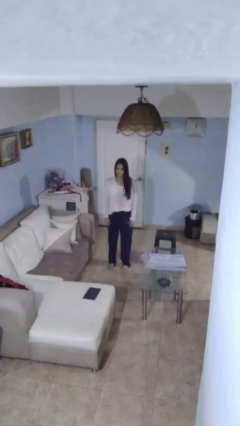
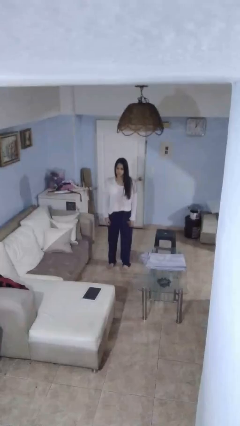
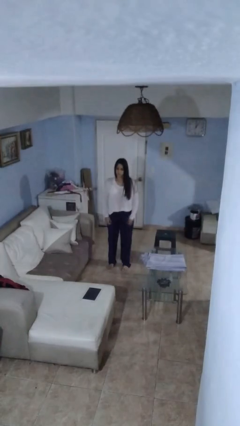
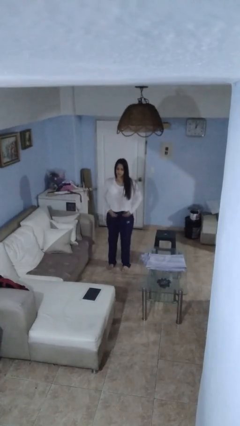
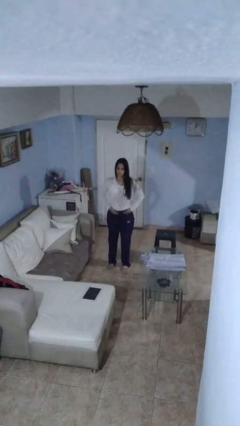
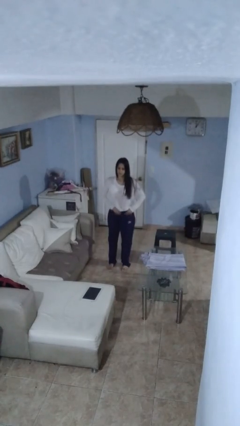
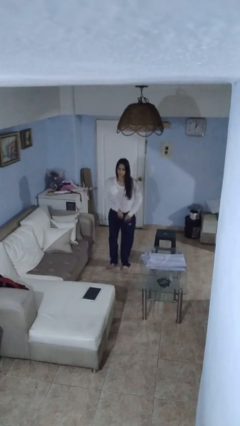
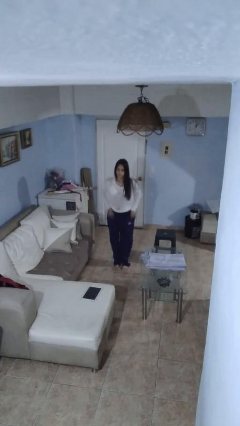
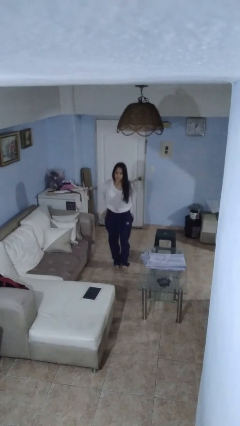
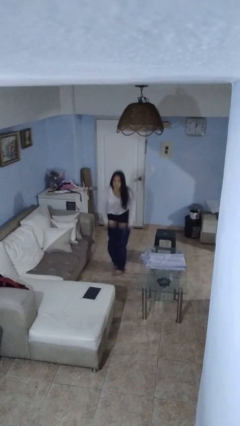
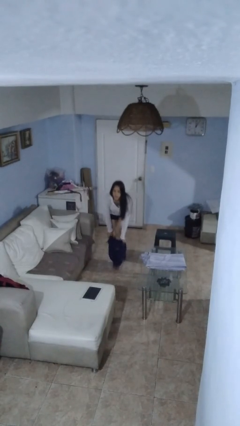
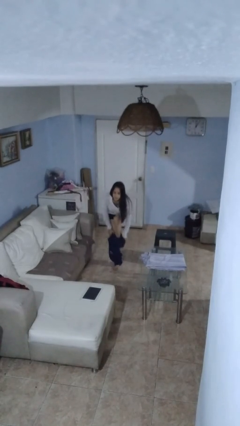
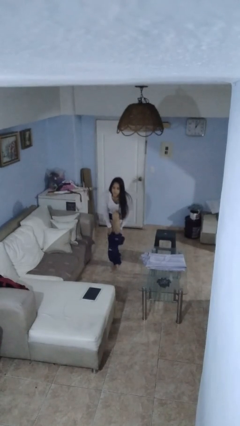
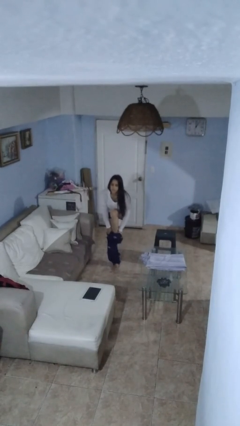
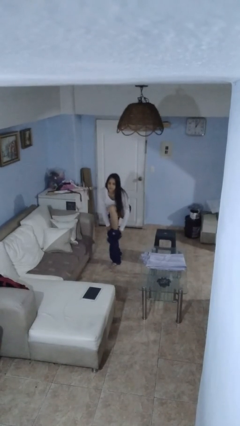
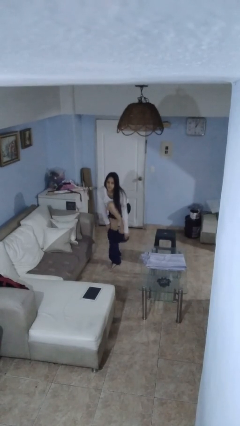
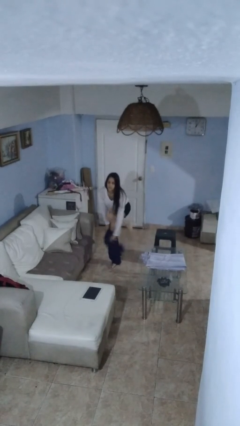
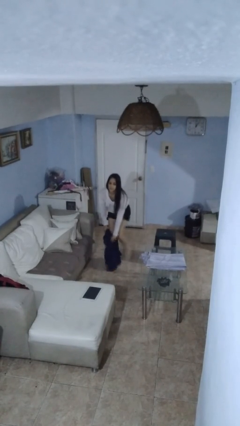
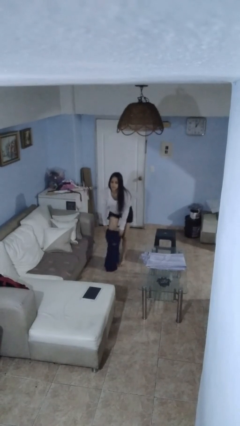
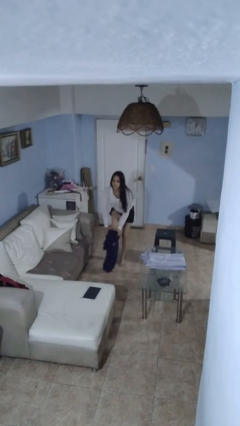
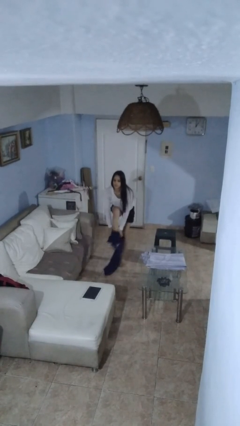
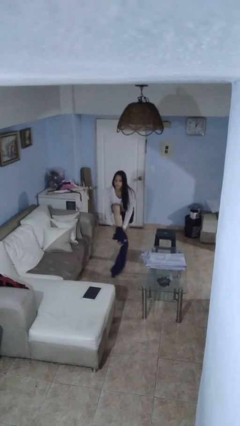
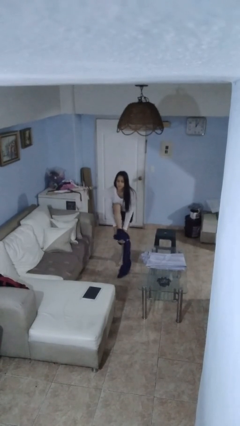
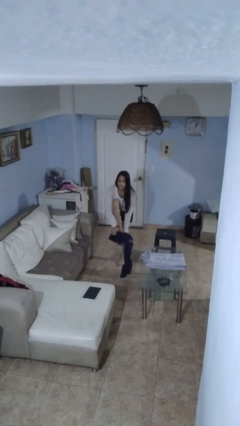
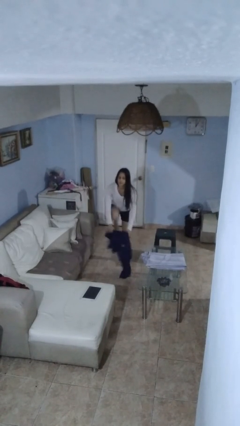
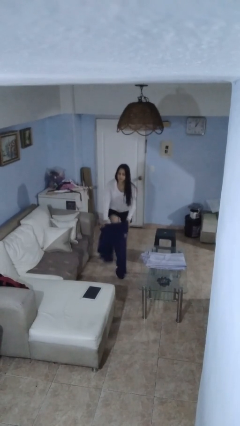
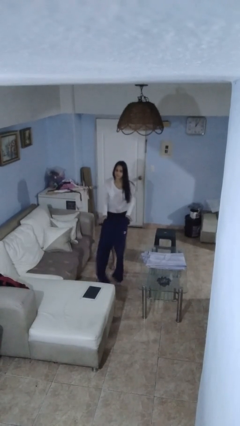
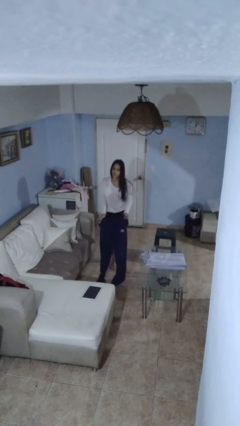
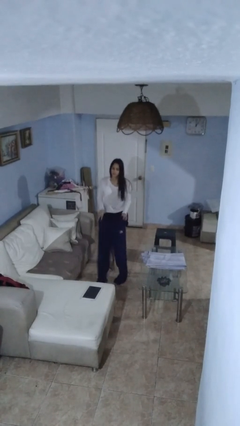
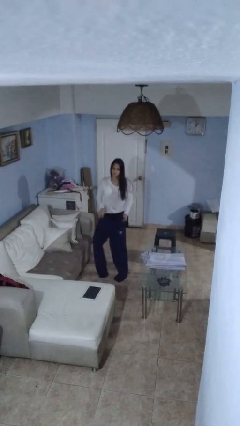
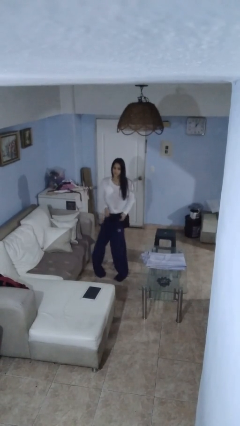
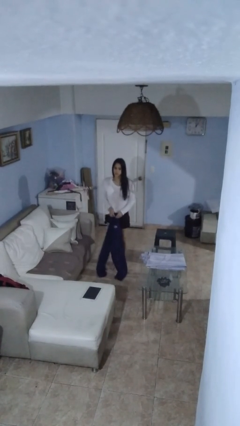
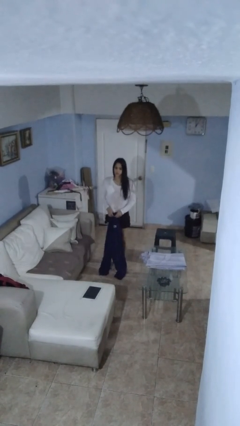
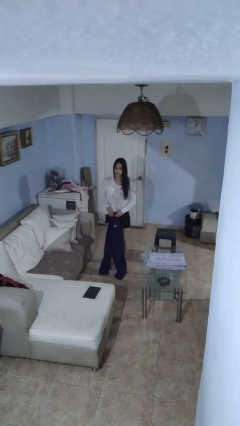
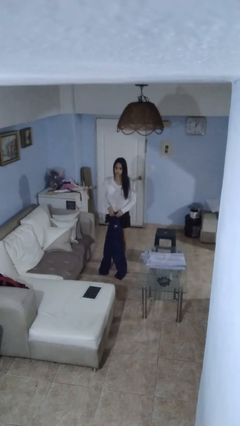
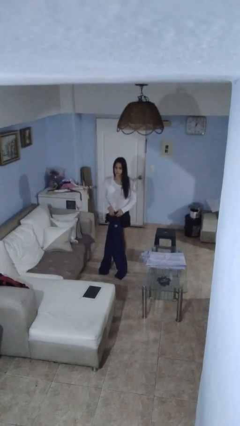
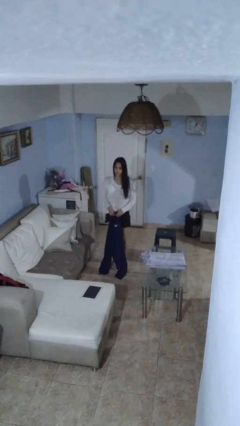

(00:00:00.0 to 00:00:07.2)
person takes off pants

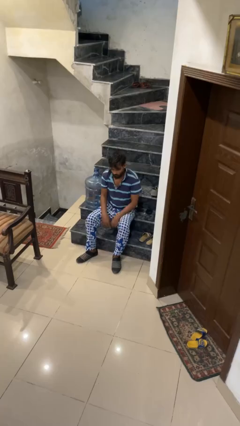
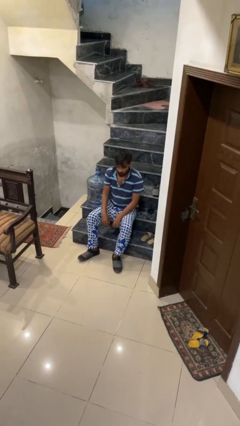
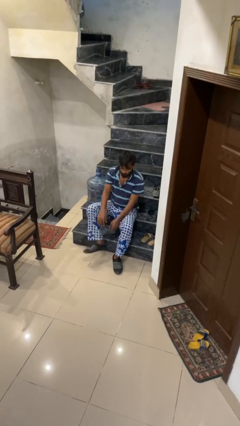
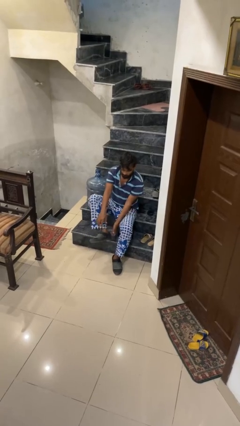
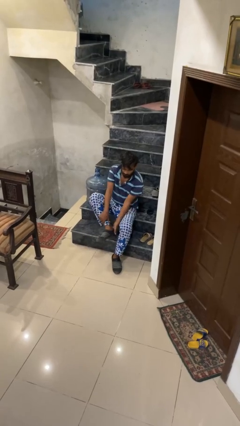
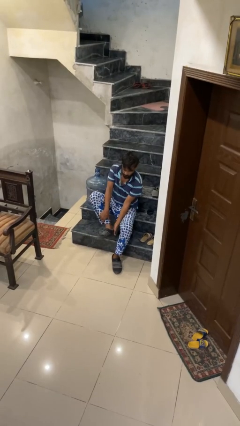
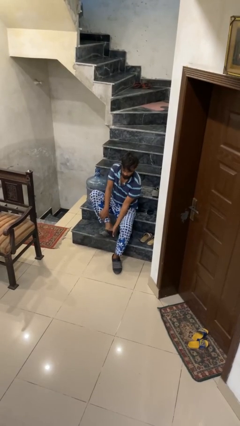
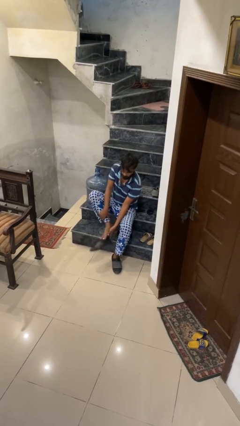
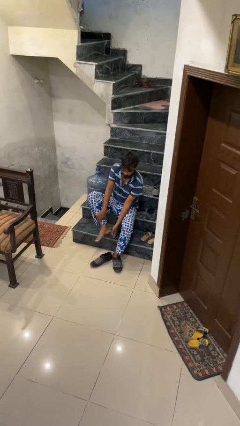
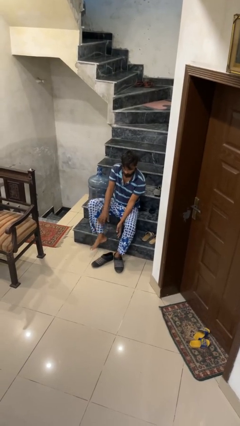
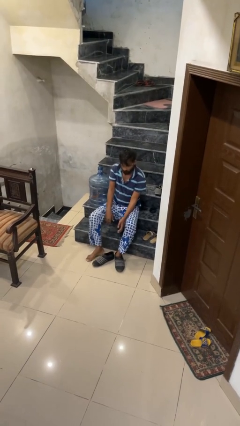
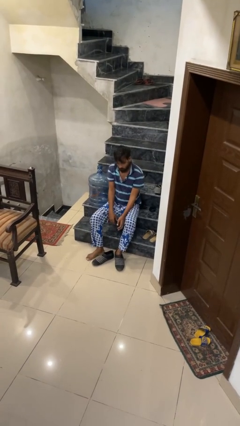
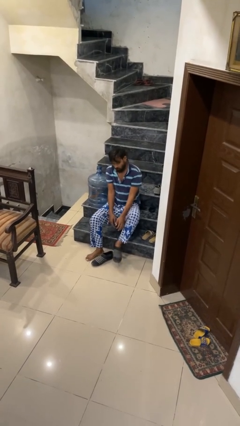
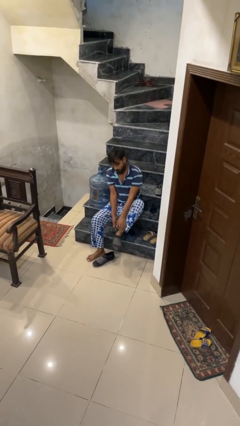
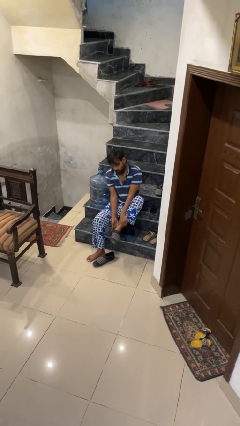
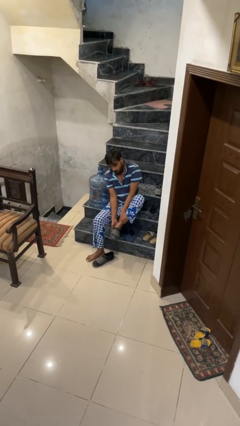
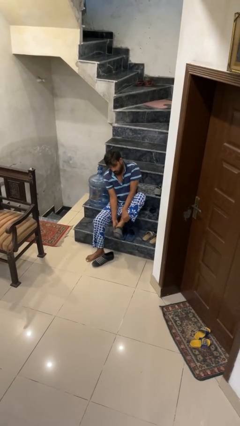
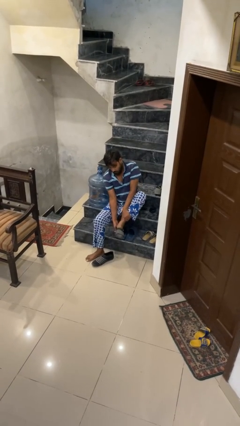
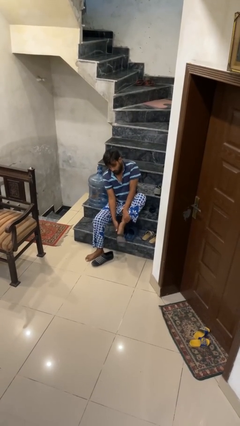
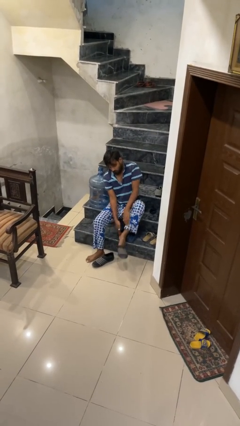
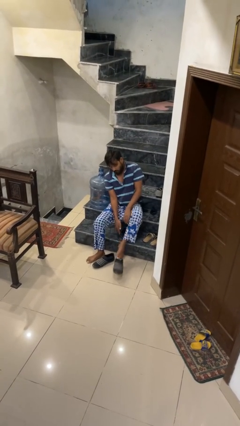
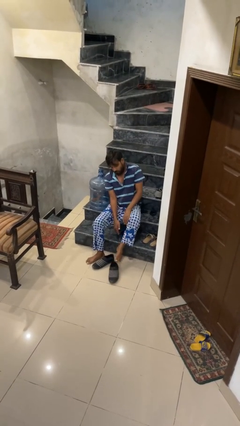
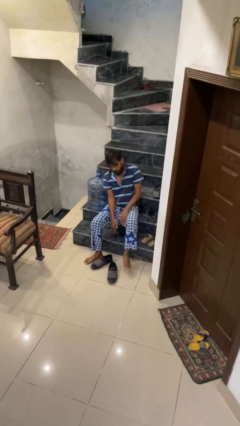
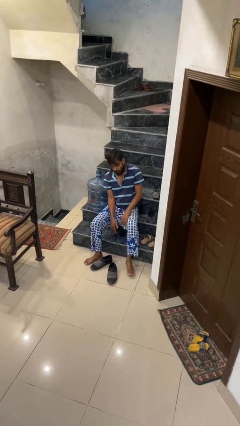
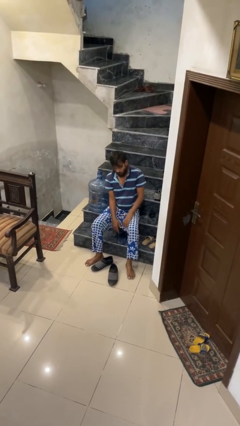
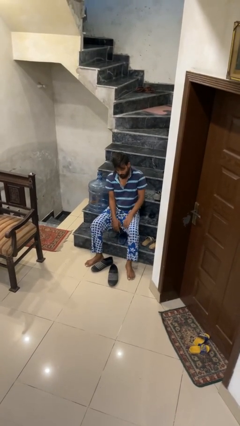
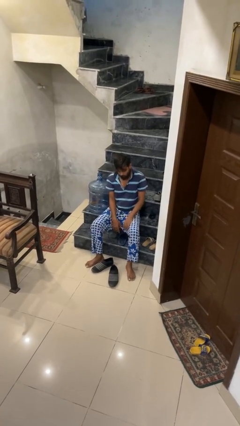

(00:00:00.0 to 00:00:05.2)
person takes off shoes

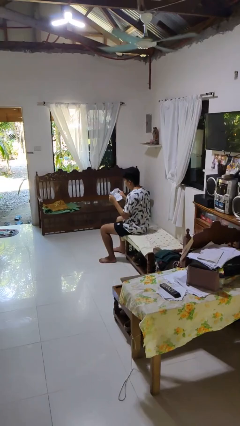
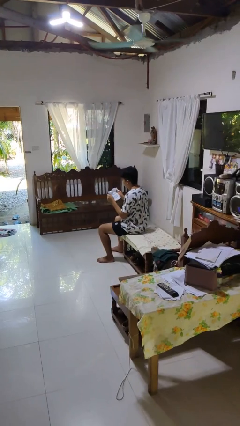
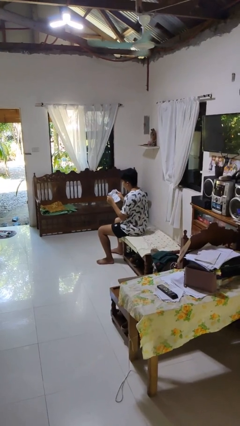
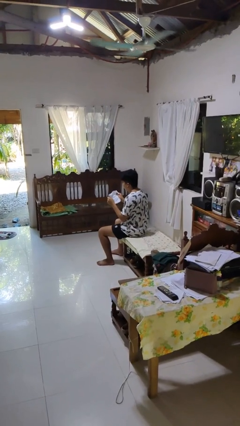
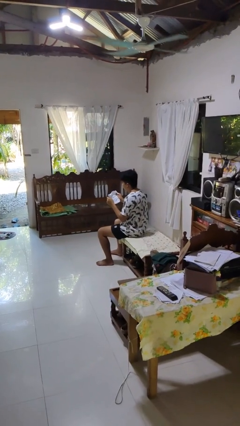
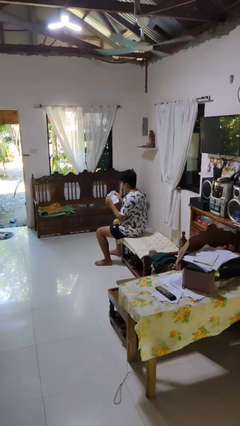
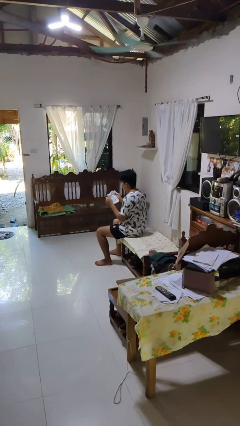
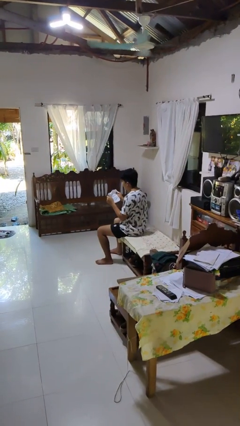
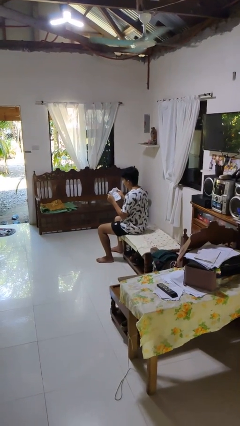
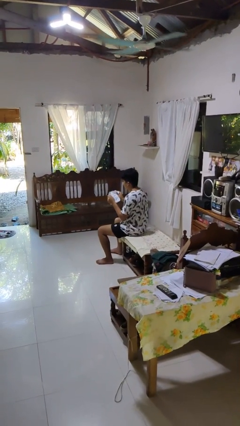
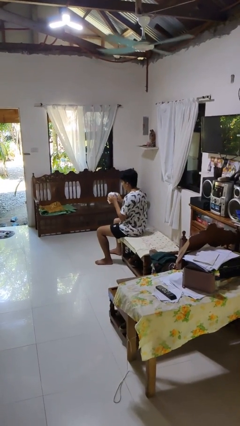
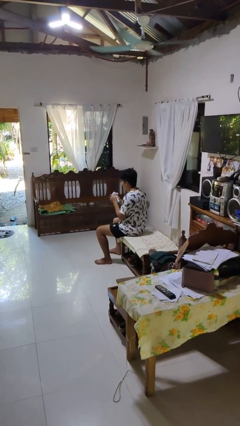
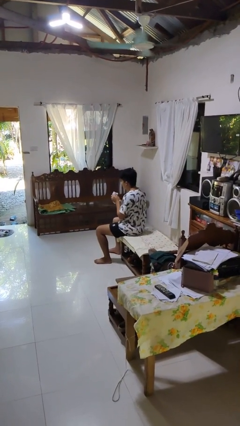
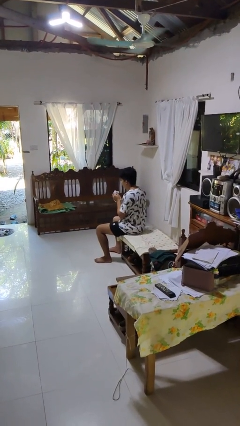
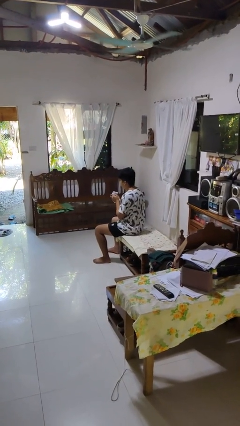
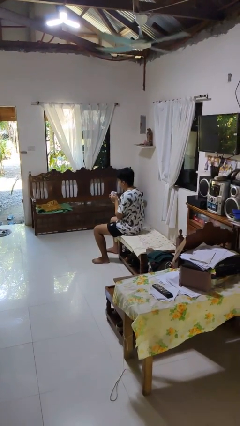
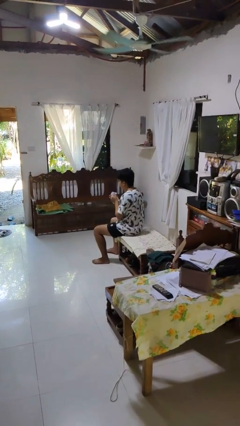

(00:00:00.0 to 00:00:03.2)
person crumples paper

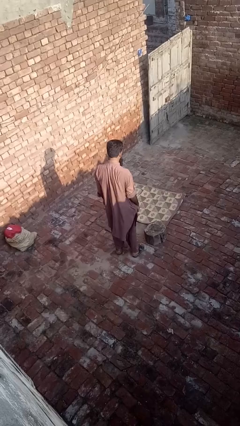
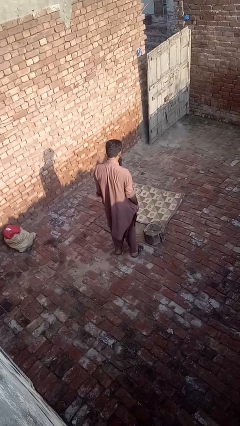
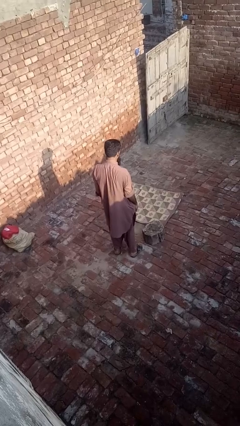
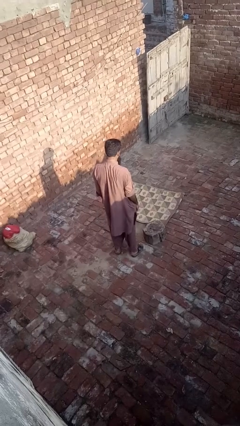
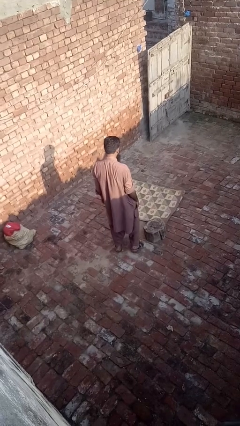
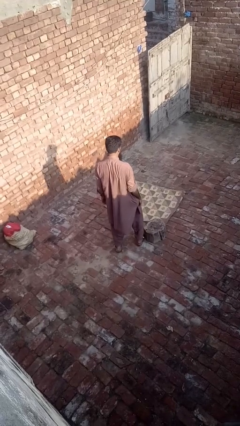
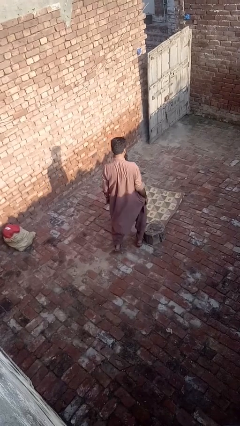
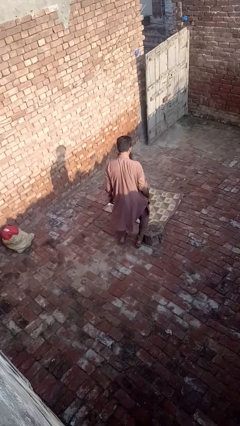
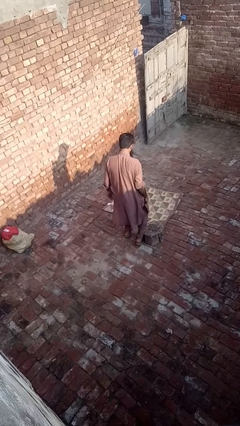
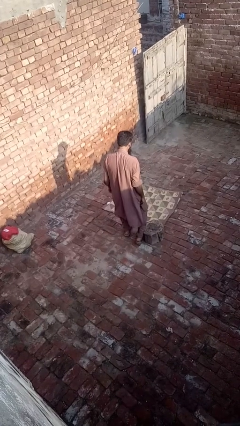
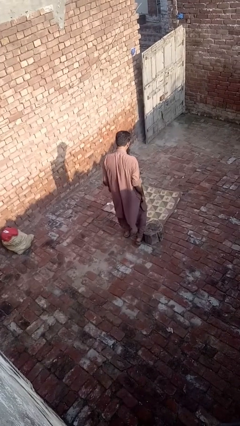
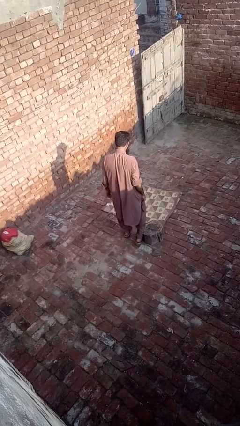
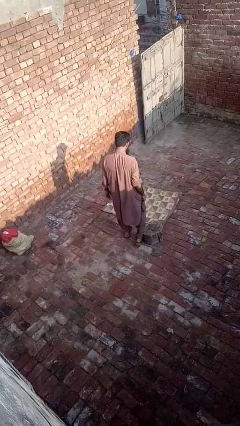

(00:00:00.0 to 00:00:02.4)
person trips on object on floor
